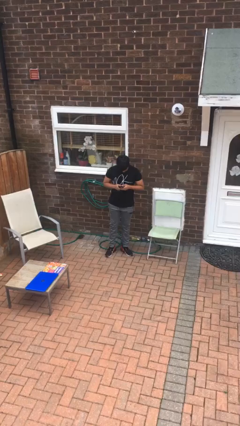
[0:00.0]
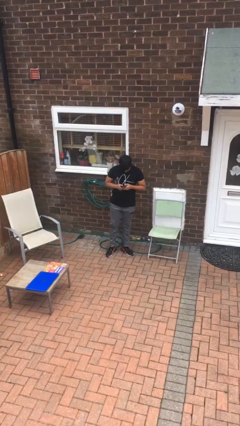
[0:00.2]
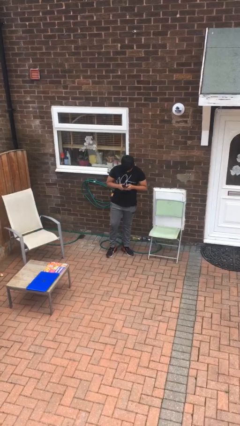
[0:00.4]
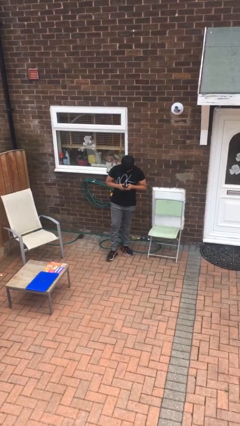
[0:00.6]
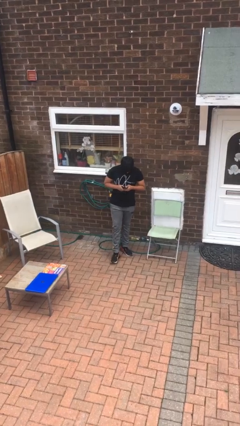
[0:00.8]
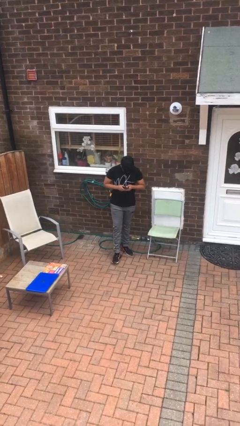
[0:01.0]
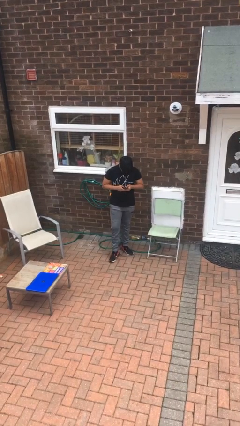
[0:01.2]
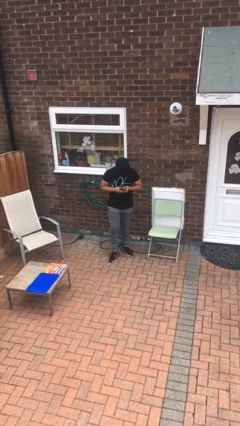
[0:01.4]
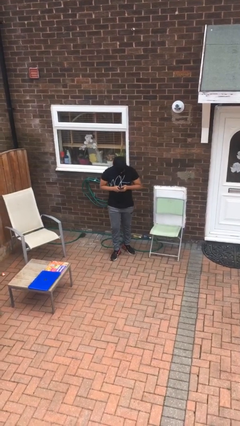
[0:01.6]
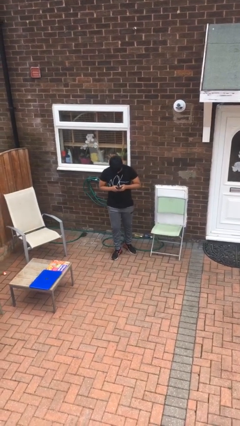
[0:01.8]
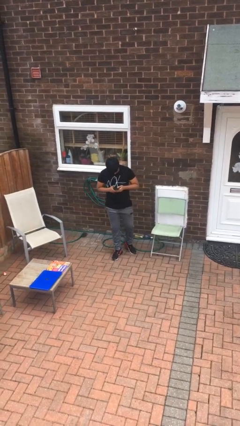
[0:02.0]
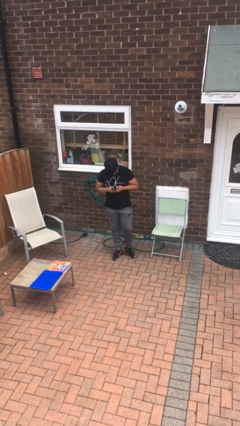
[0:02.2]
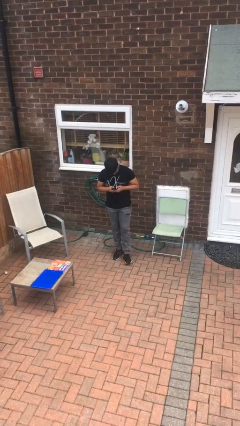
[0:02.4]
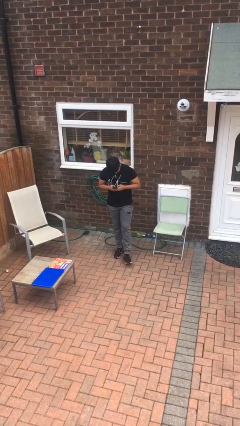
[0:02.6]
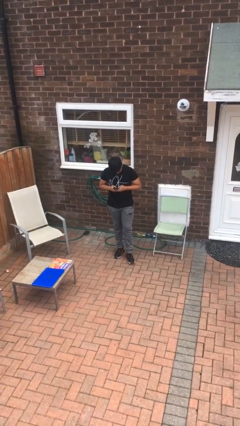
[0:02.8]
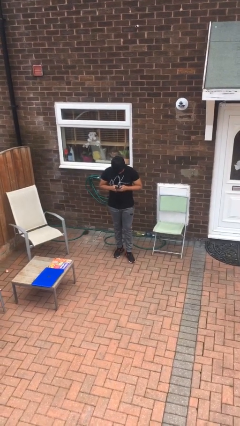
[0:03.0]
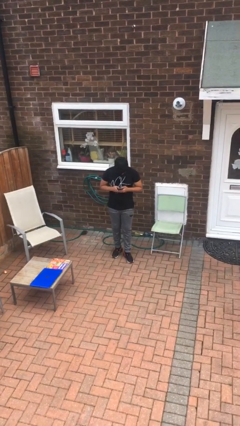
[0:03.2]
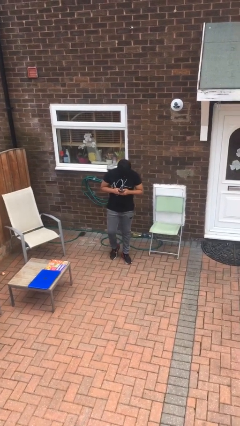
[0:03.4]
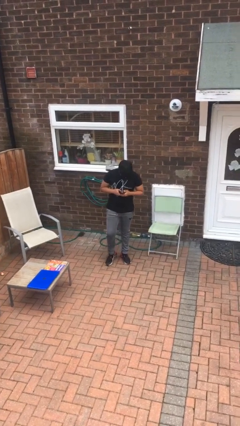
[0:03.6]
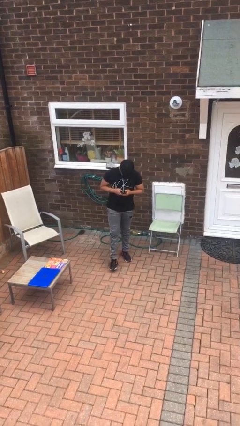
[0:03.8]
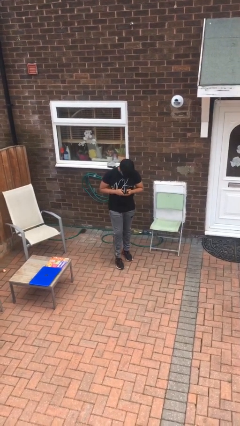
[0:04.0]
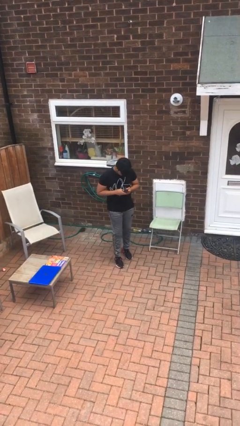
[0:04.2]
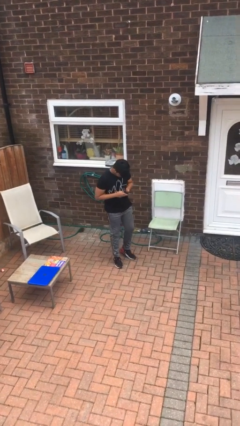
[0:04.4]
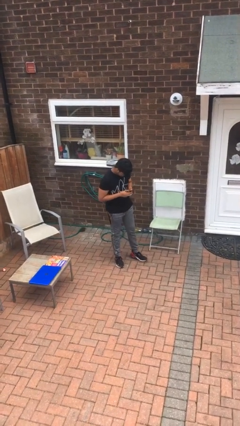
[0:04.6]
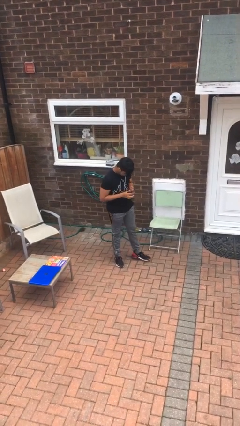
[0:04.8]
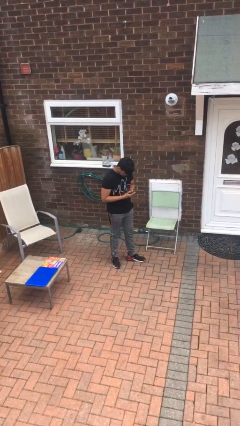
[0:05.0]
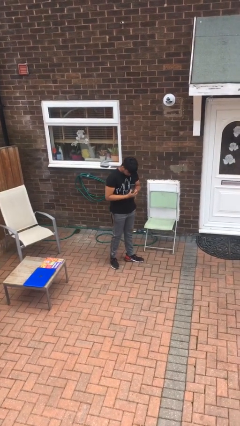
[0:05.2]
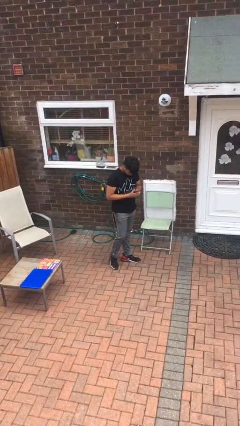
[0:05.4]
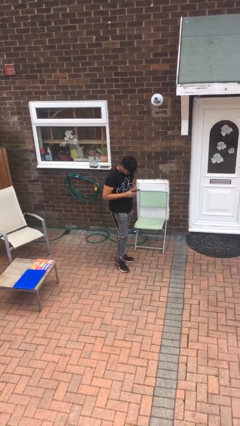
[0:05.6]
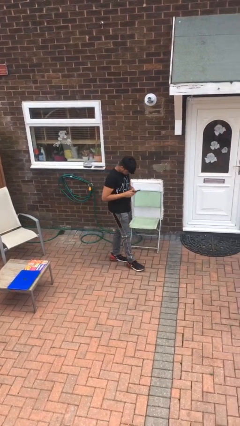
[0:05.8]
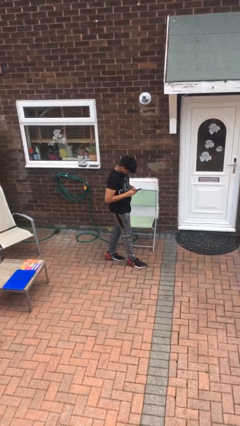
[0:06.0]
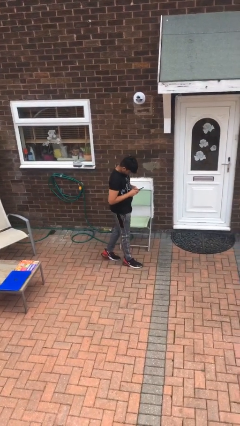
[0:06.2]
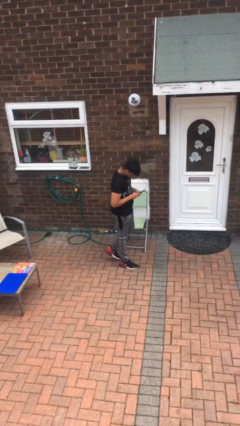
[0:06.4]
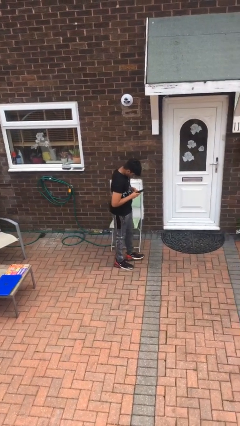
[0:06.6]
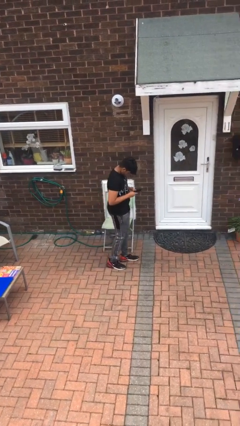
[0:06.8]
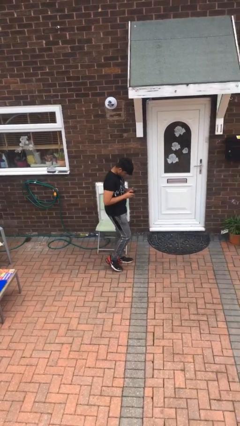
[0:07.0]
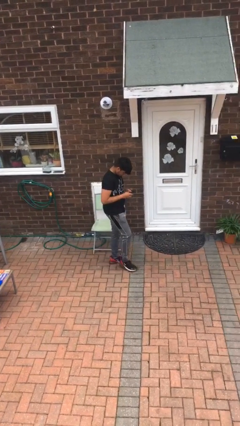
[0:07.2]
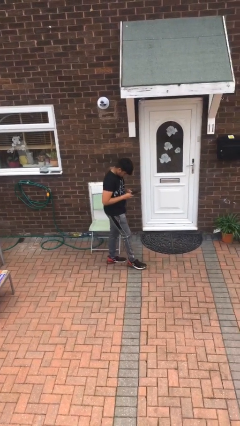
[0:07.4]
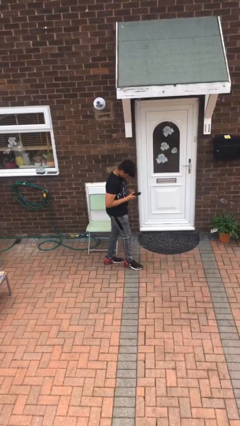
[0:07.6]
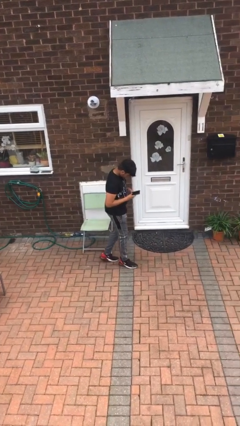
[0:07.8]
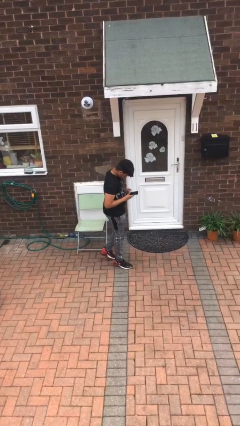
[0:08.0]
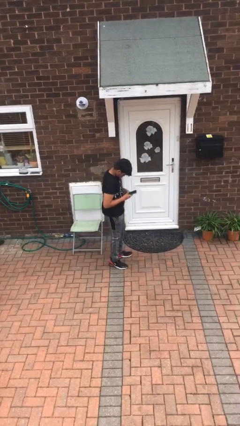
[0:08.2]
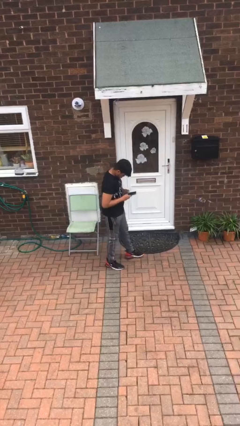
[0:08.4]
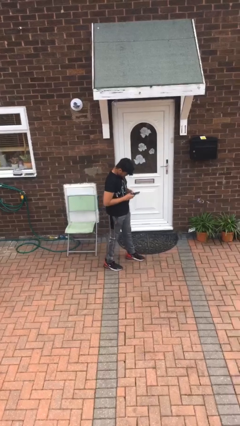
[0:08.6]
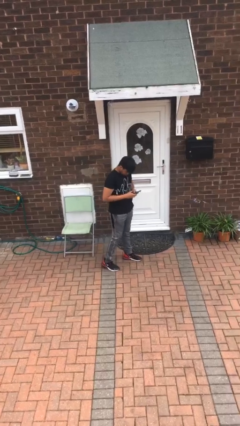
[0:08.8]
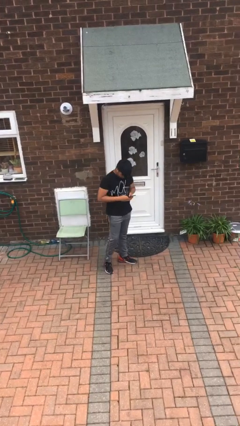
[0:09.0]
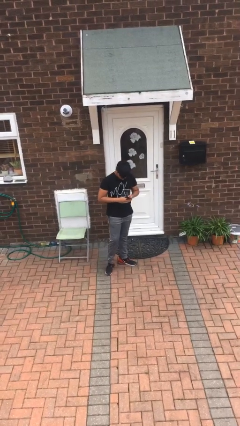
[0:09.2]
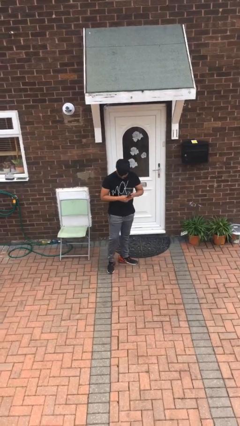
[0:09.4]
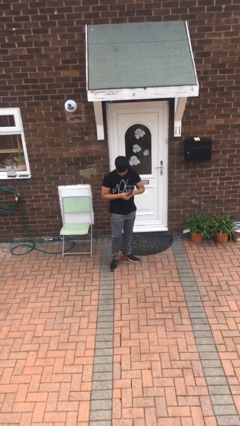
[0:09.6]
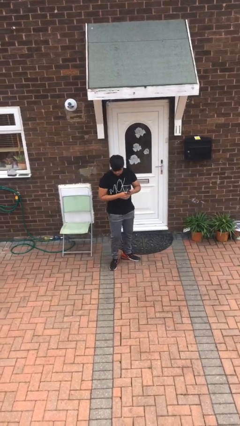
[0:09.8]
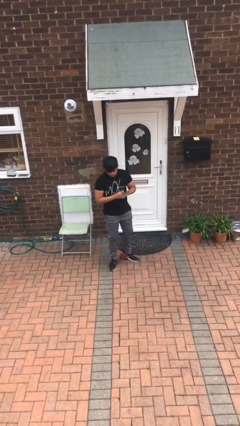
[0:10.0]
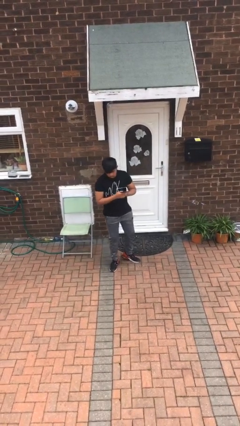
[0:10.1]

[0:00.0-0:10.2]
person texts on phone

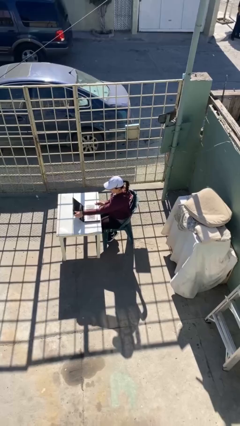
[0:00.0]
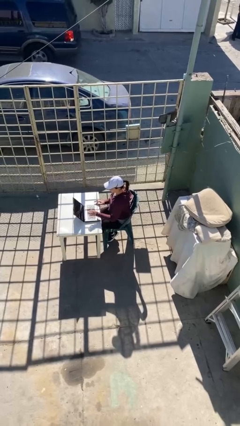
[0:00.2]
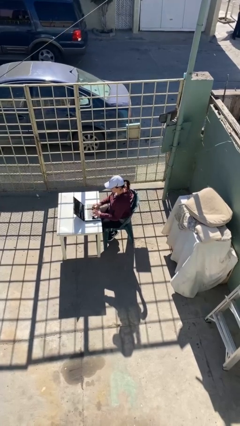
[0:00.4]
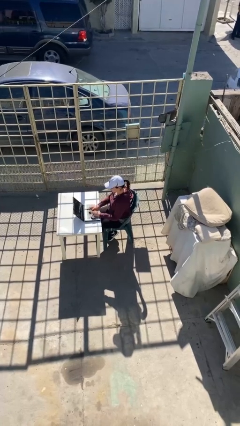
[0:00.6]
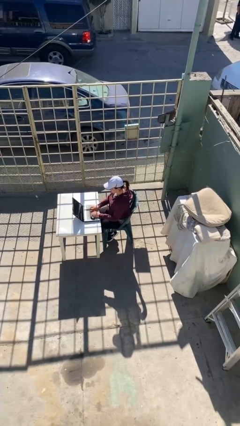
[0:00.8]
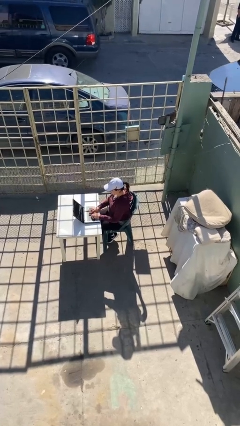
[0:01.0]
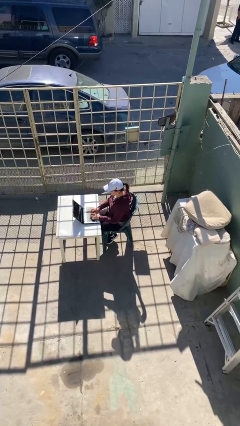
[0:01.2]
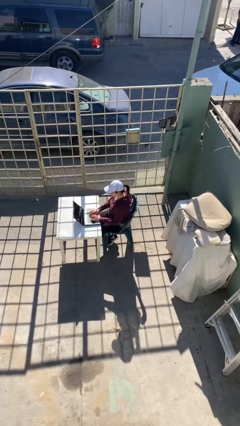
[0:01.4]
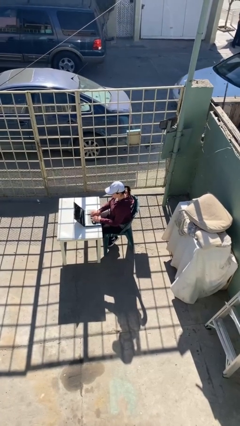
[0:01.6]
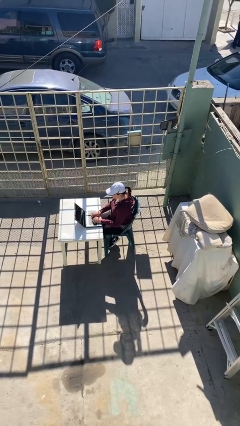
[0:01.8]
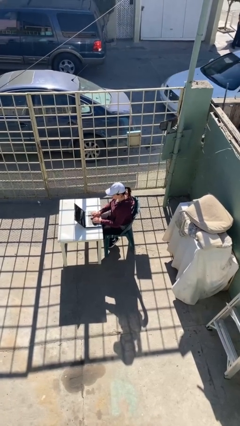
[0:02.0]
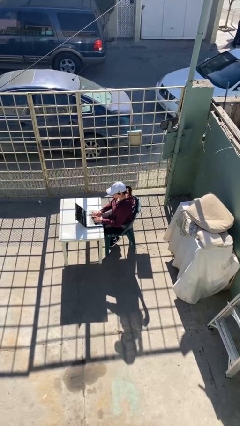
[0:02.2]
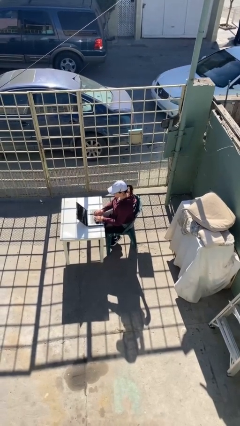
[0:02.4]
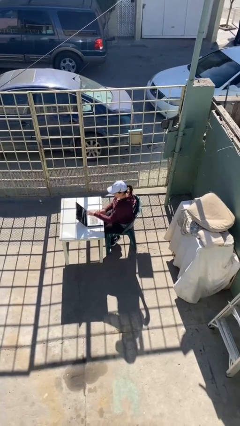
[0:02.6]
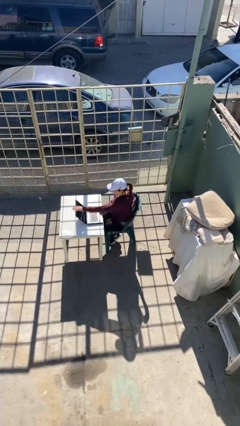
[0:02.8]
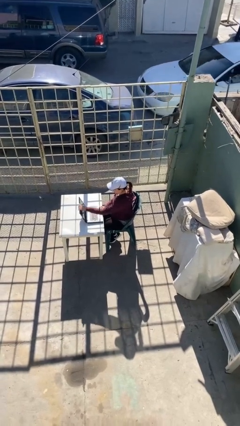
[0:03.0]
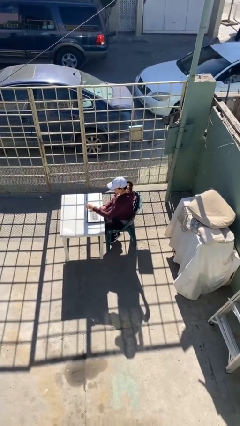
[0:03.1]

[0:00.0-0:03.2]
person interacts with laptop

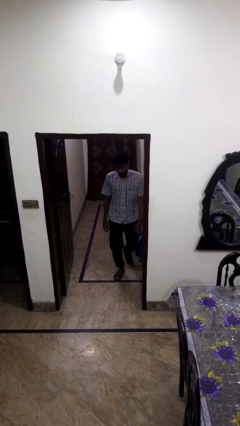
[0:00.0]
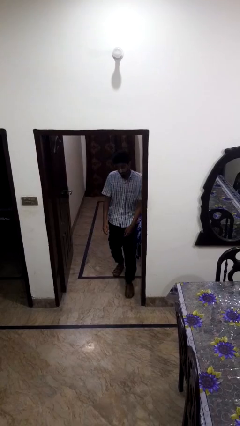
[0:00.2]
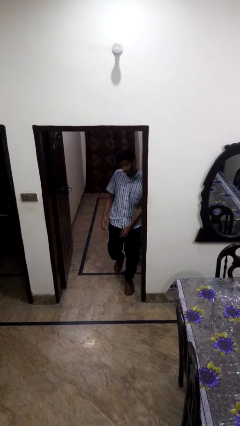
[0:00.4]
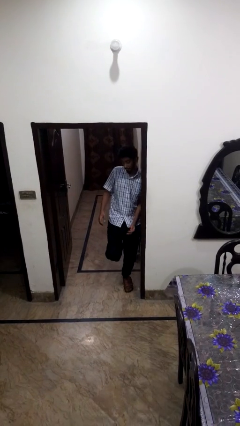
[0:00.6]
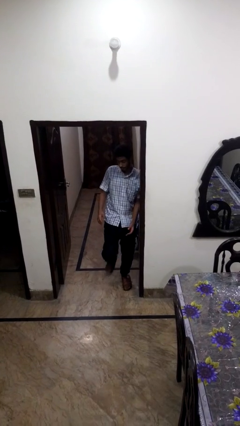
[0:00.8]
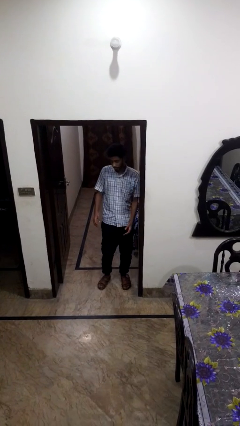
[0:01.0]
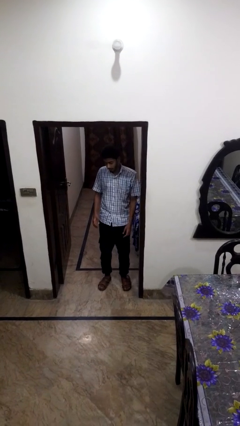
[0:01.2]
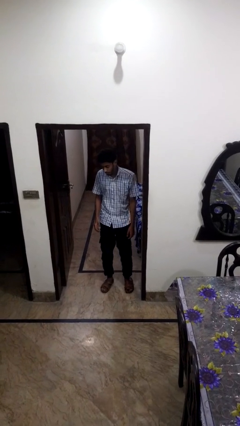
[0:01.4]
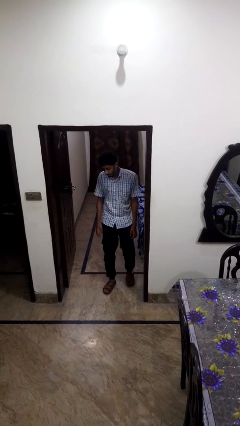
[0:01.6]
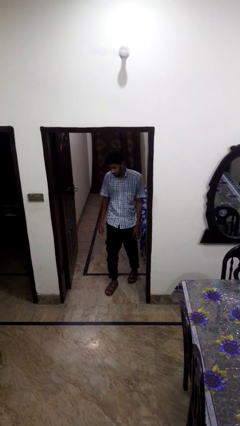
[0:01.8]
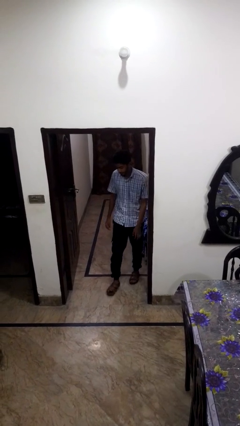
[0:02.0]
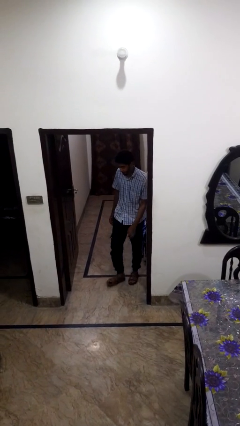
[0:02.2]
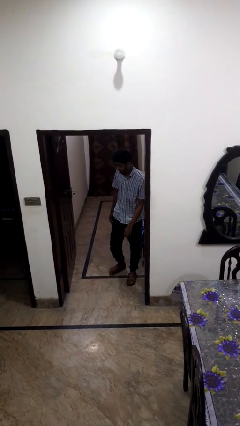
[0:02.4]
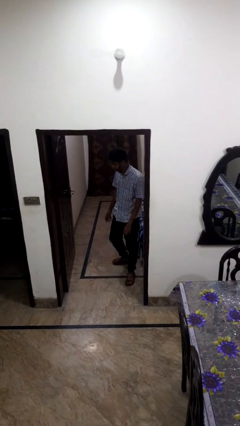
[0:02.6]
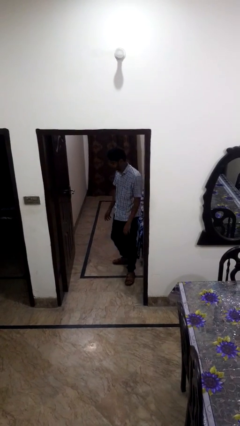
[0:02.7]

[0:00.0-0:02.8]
person bumps into wall

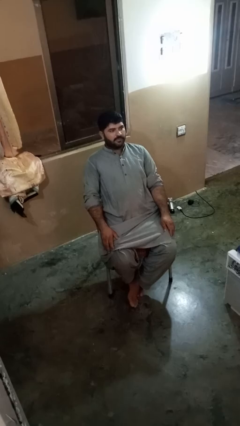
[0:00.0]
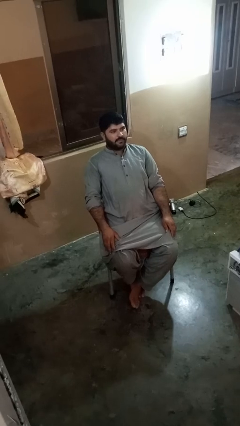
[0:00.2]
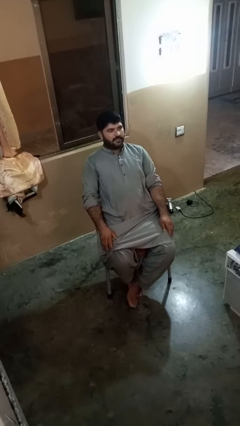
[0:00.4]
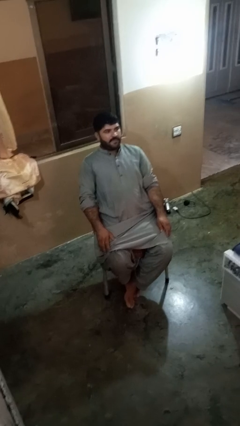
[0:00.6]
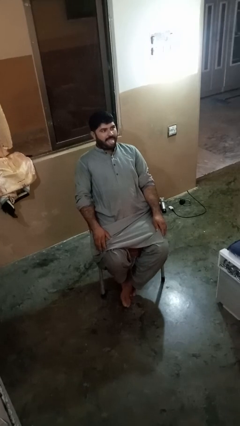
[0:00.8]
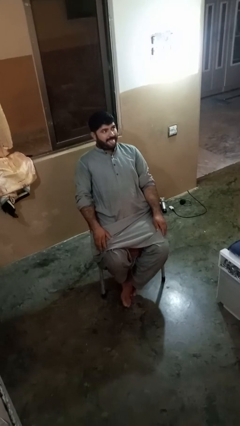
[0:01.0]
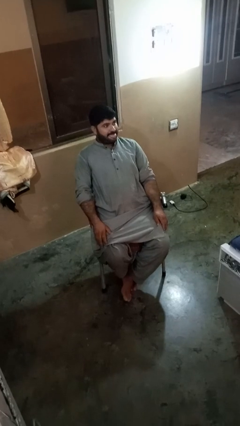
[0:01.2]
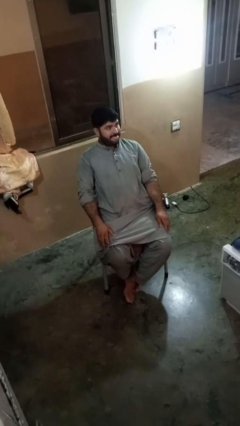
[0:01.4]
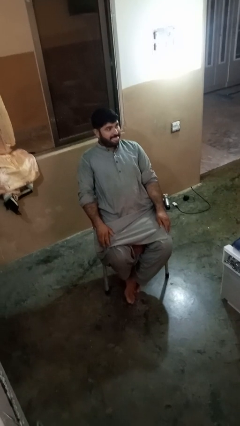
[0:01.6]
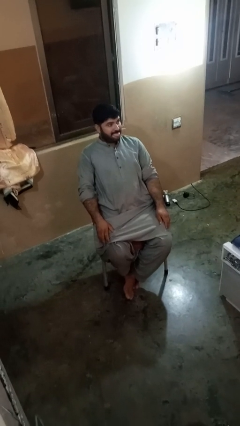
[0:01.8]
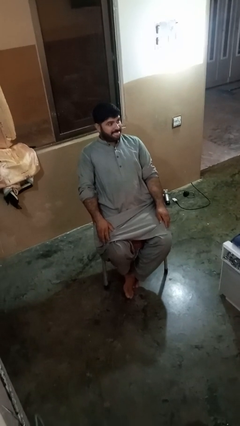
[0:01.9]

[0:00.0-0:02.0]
person sticks out tongue
